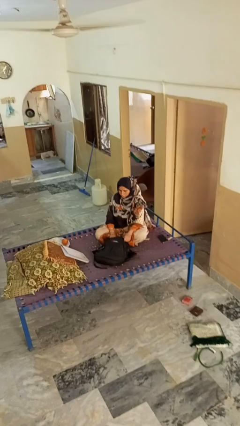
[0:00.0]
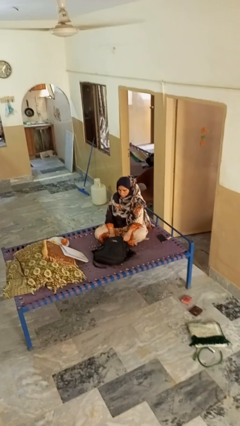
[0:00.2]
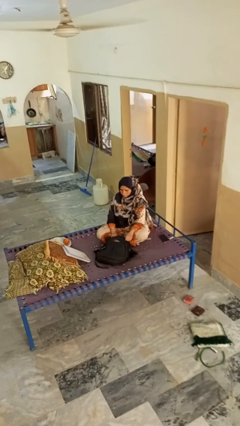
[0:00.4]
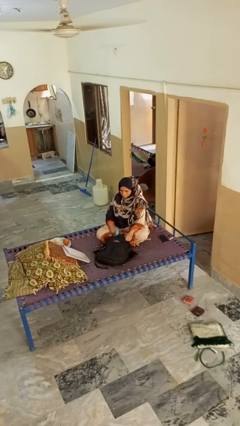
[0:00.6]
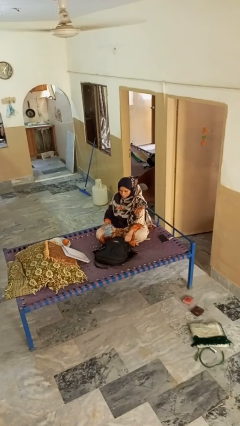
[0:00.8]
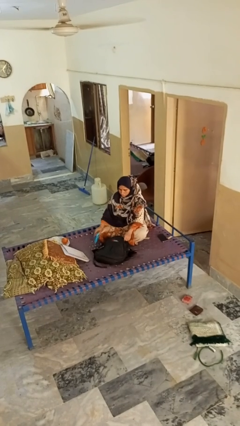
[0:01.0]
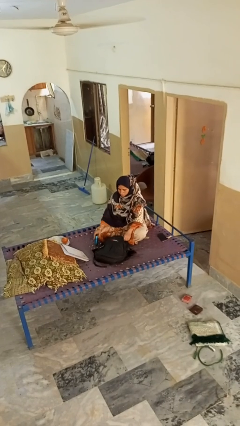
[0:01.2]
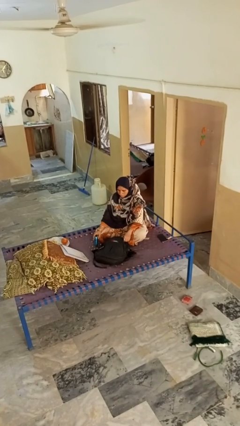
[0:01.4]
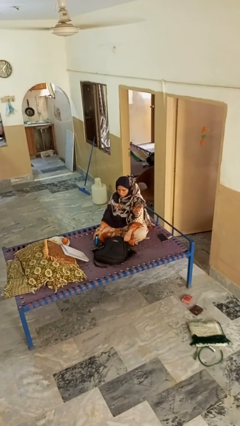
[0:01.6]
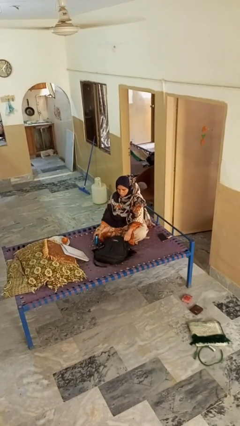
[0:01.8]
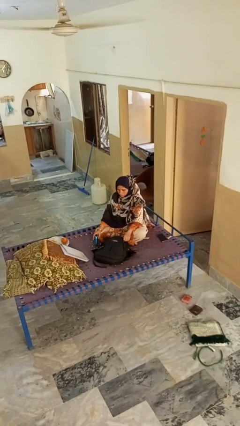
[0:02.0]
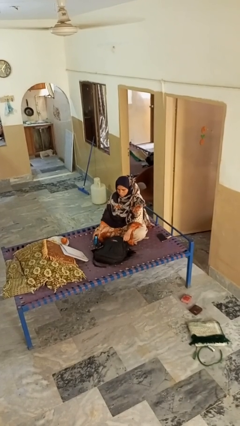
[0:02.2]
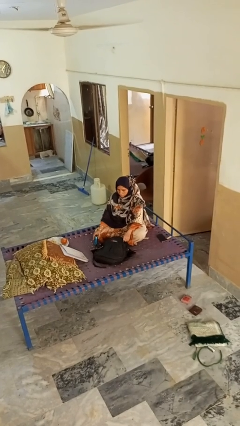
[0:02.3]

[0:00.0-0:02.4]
person takes object from bag

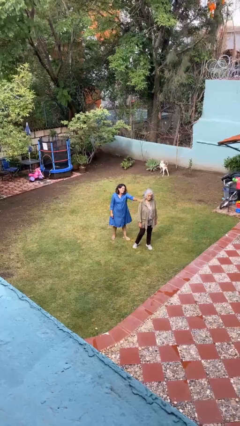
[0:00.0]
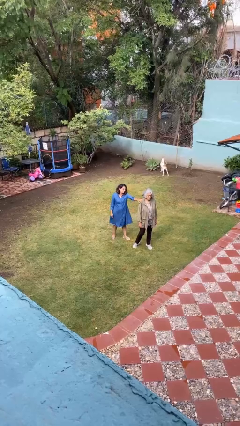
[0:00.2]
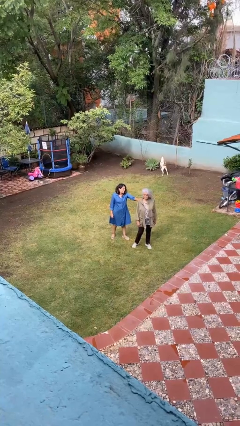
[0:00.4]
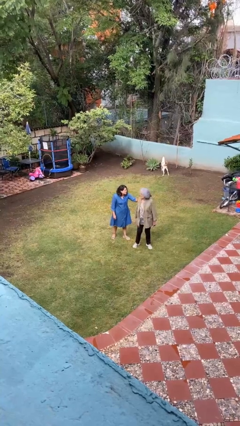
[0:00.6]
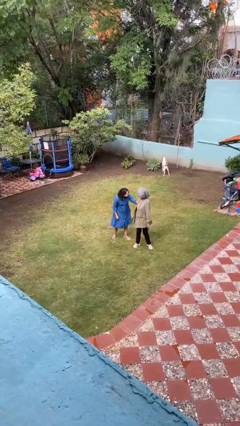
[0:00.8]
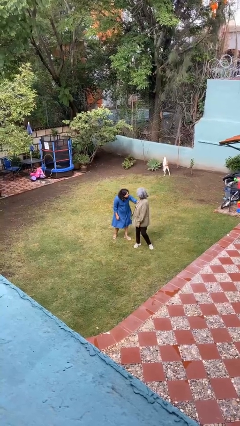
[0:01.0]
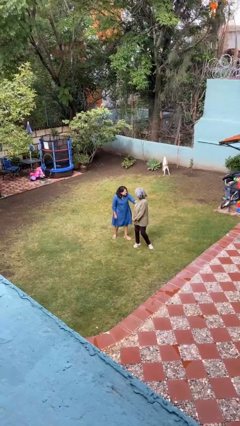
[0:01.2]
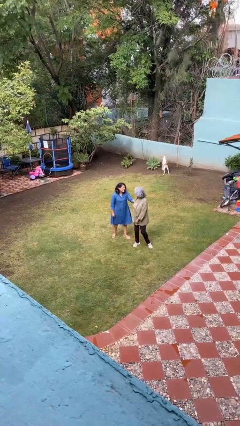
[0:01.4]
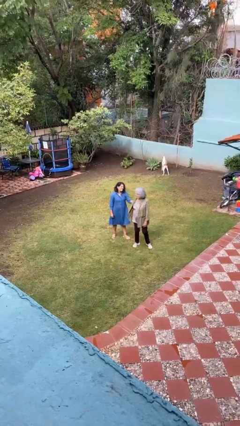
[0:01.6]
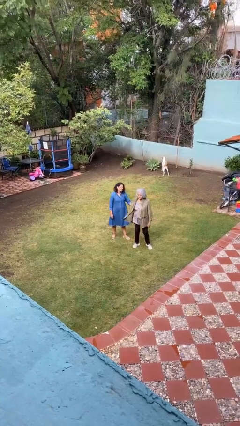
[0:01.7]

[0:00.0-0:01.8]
person spins person around

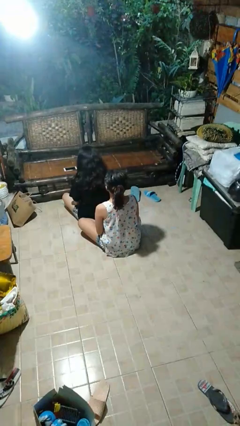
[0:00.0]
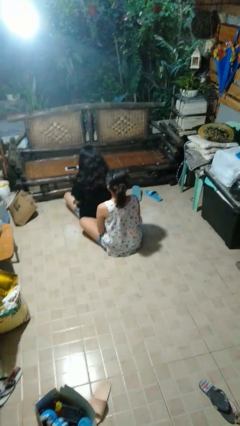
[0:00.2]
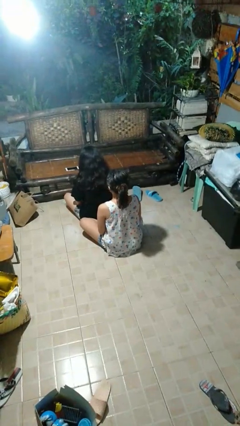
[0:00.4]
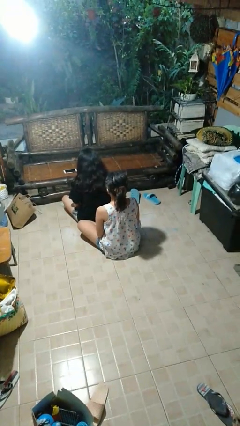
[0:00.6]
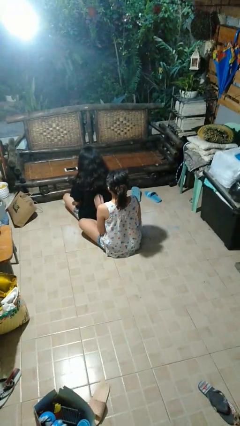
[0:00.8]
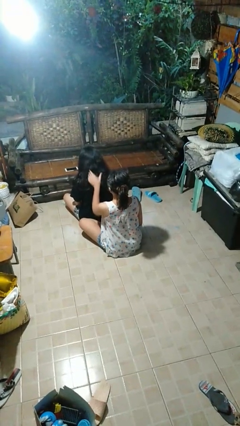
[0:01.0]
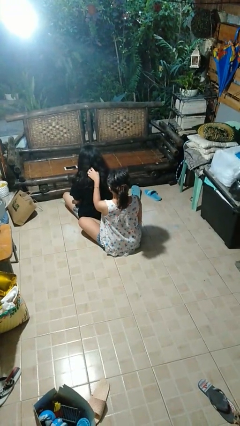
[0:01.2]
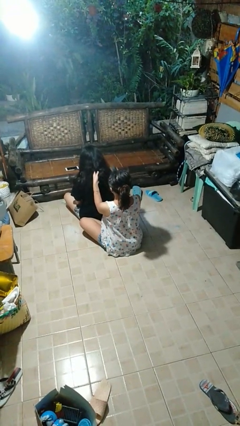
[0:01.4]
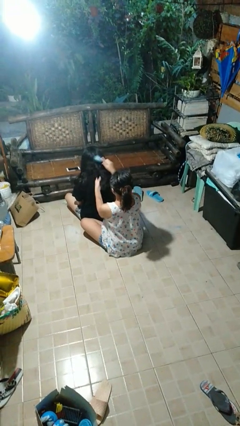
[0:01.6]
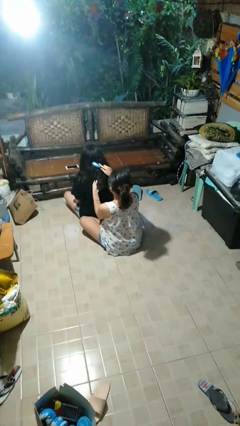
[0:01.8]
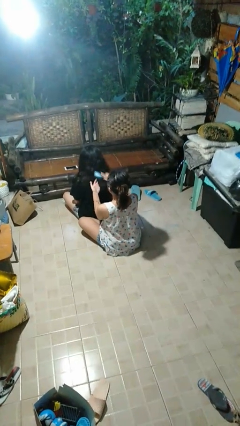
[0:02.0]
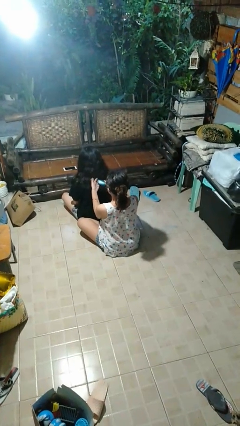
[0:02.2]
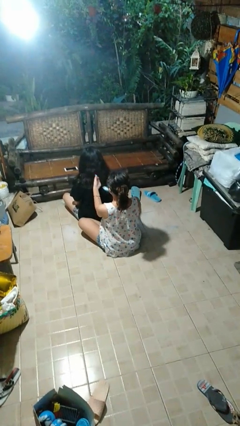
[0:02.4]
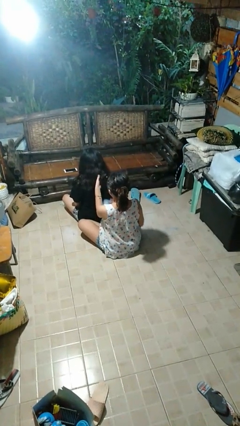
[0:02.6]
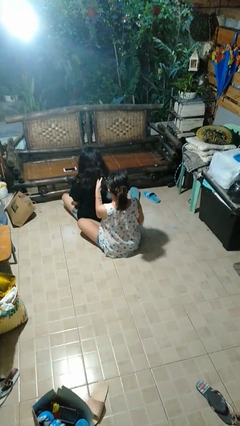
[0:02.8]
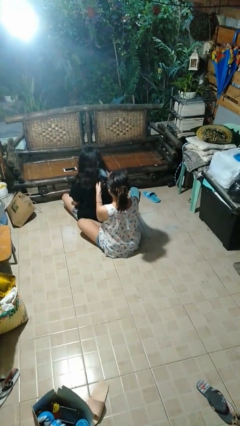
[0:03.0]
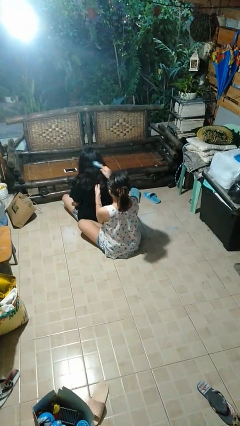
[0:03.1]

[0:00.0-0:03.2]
person brushes hair of person

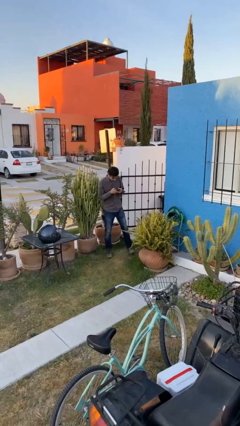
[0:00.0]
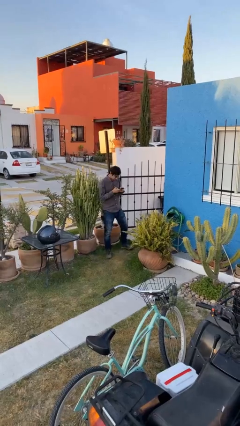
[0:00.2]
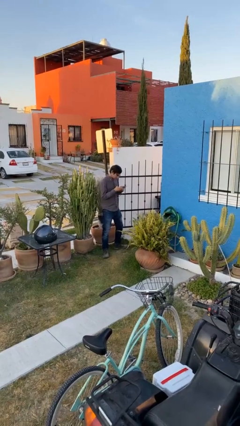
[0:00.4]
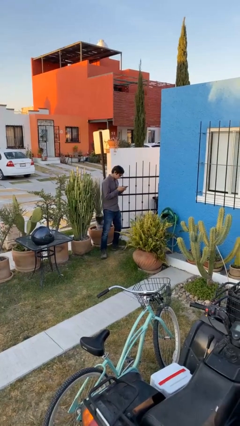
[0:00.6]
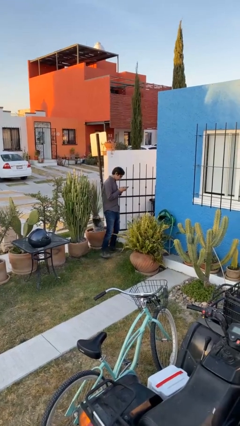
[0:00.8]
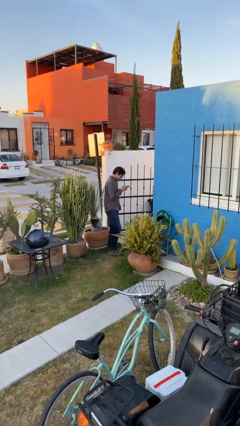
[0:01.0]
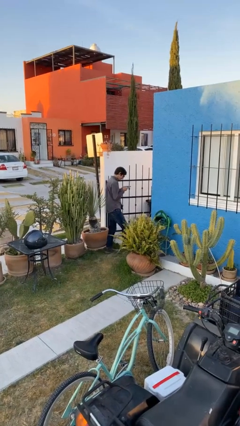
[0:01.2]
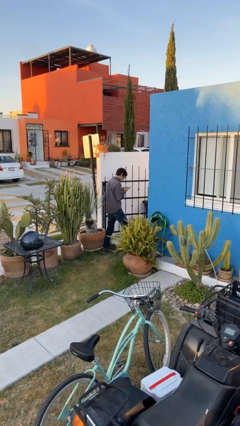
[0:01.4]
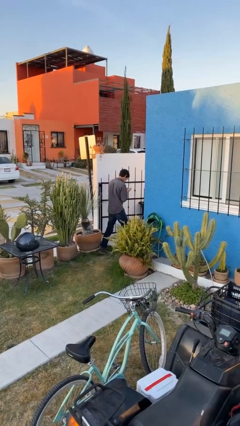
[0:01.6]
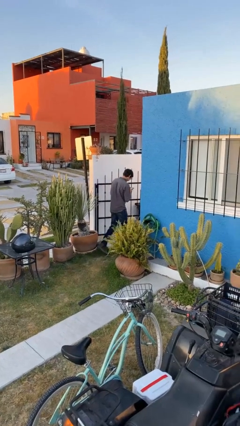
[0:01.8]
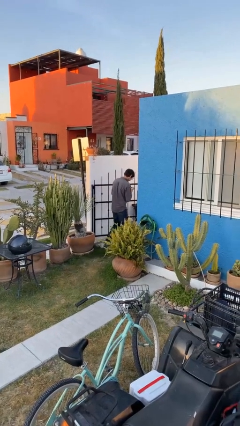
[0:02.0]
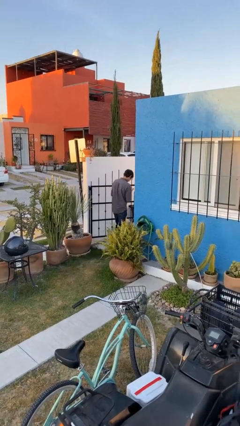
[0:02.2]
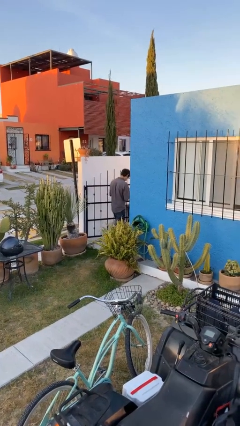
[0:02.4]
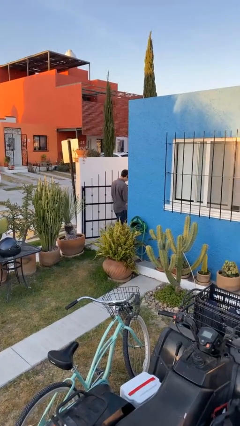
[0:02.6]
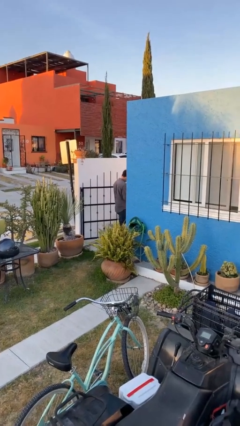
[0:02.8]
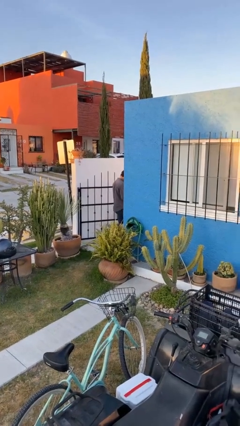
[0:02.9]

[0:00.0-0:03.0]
person exits scene through structure

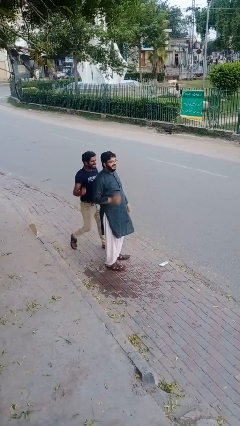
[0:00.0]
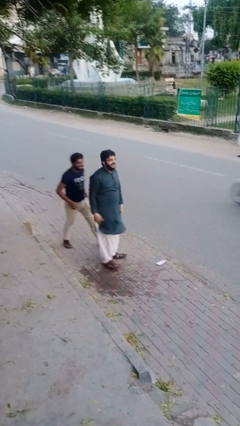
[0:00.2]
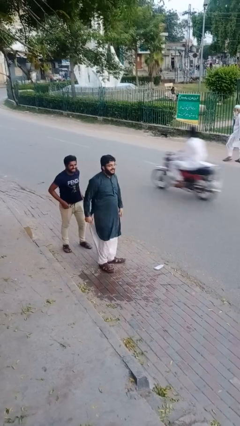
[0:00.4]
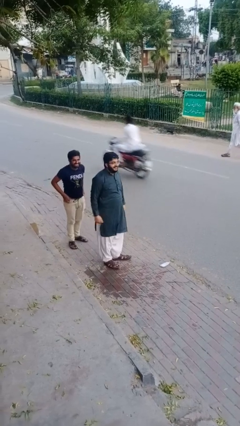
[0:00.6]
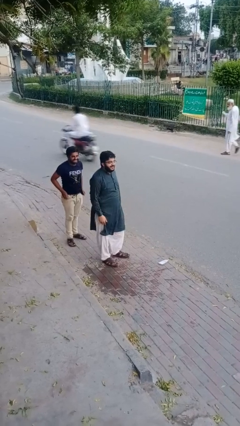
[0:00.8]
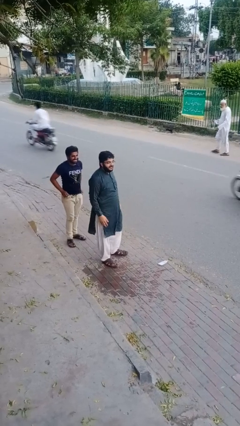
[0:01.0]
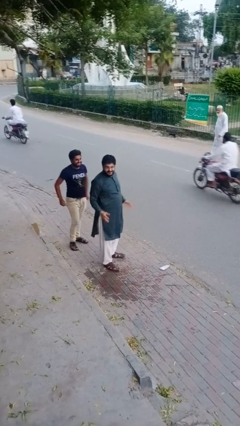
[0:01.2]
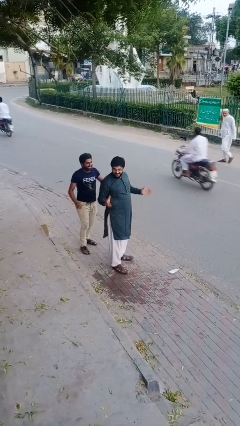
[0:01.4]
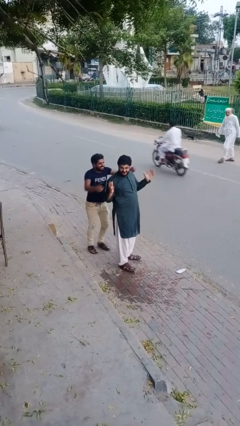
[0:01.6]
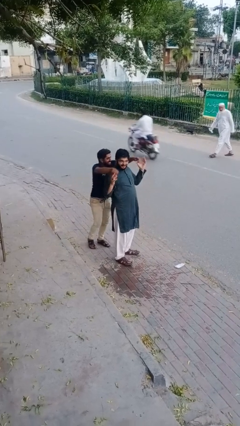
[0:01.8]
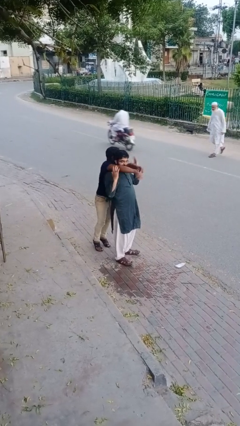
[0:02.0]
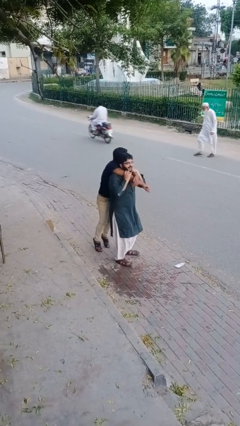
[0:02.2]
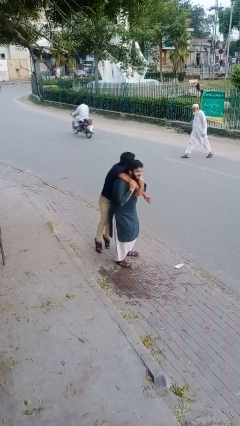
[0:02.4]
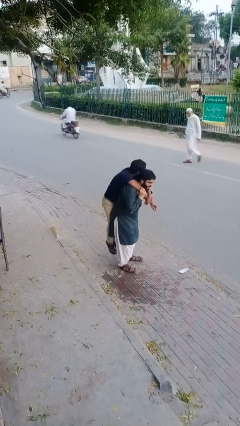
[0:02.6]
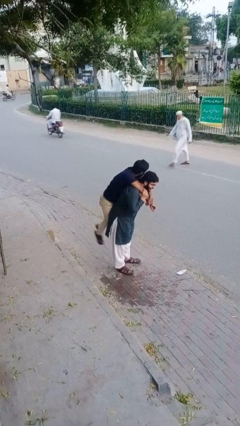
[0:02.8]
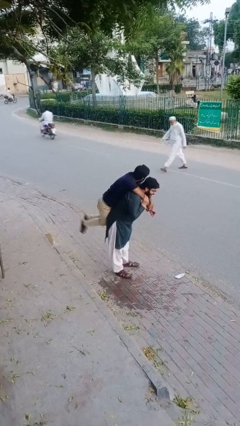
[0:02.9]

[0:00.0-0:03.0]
person carries person over shoulder

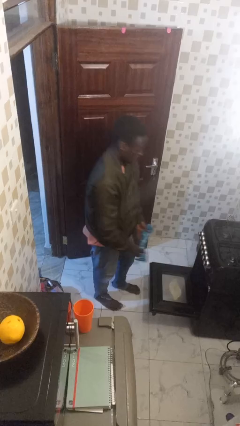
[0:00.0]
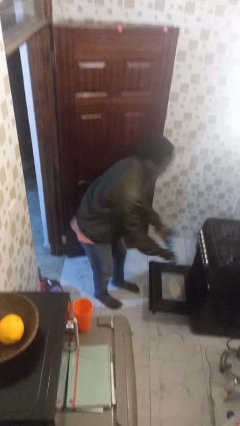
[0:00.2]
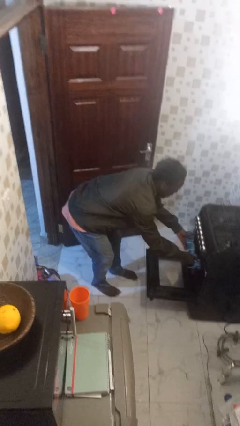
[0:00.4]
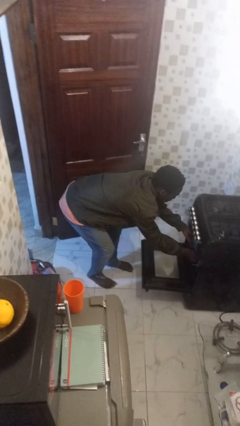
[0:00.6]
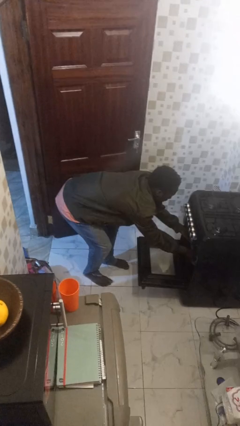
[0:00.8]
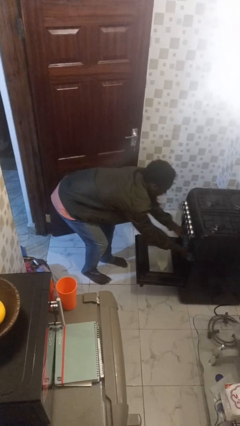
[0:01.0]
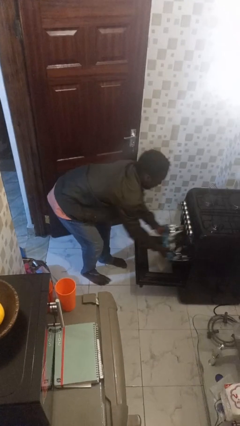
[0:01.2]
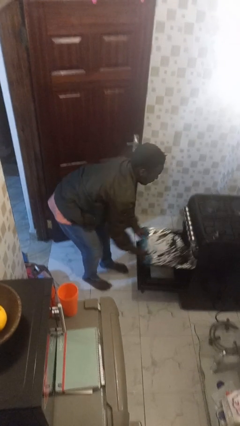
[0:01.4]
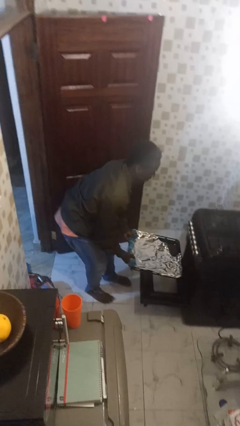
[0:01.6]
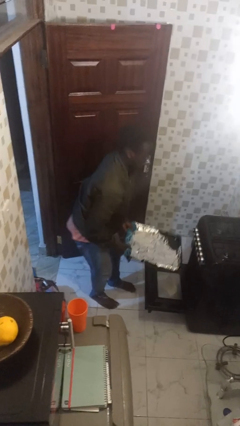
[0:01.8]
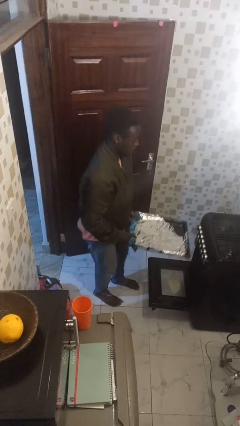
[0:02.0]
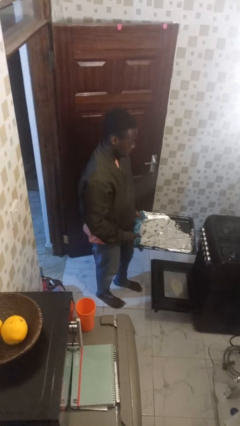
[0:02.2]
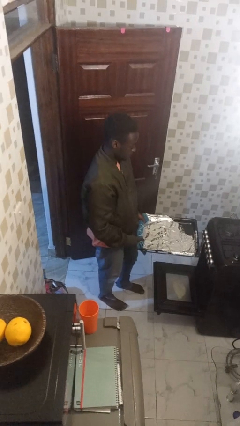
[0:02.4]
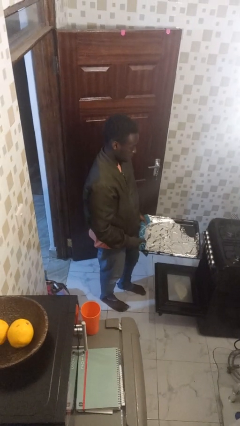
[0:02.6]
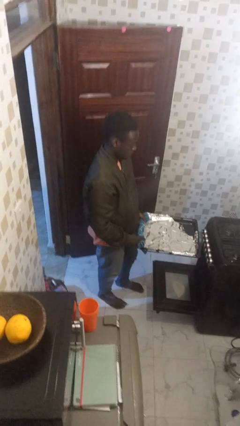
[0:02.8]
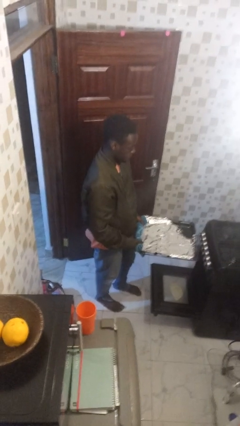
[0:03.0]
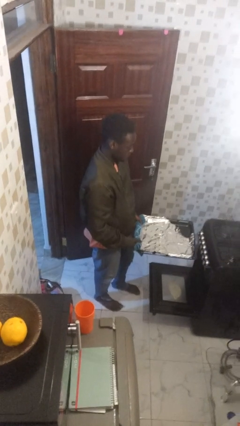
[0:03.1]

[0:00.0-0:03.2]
person takes object from oven

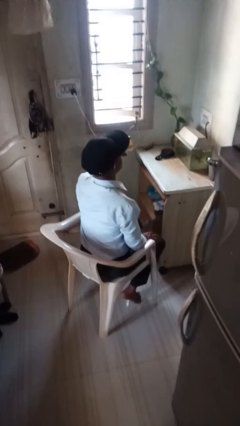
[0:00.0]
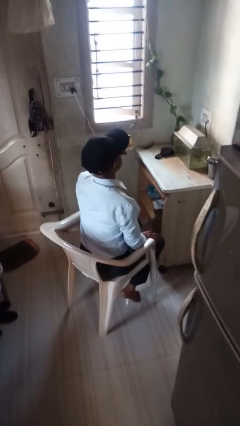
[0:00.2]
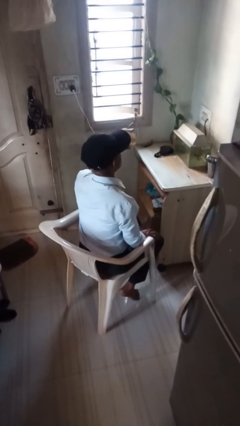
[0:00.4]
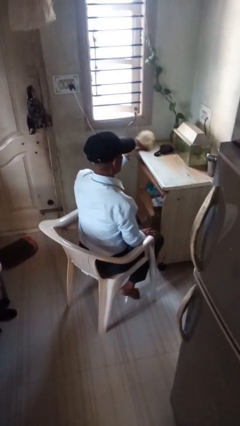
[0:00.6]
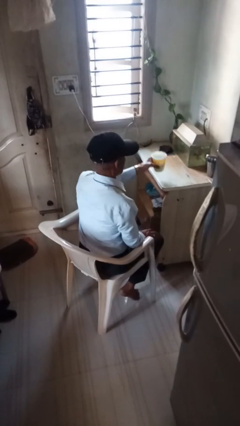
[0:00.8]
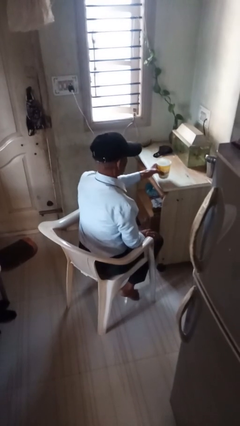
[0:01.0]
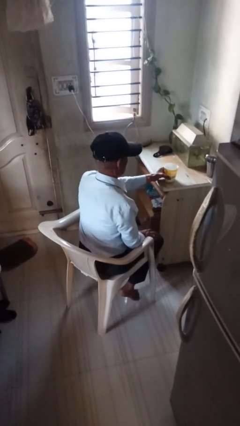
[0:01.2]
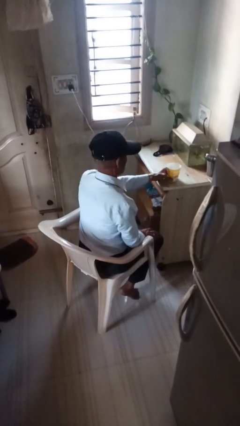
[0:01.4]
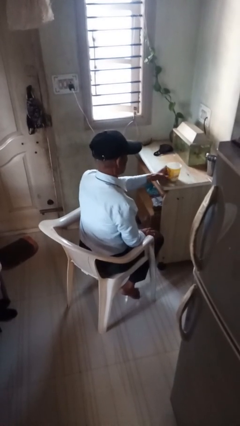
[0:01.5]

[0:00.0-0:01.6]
person puts down object on table
